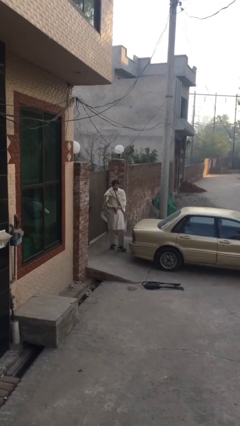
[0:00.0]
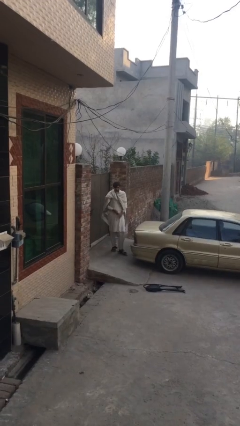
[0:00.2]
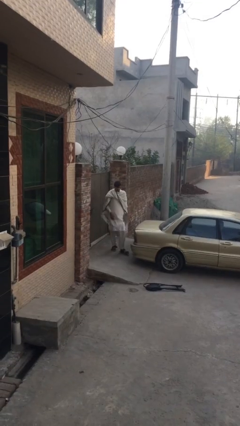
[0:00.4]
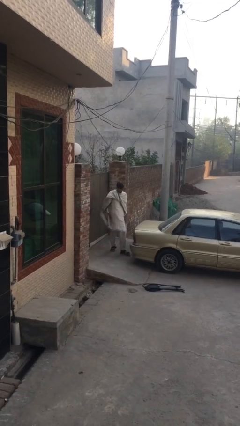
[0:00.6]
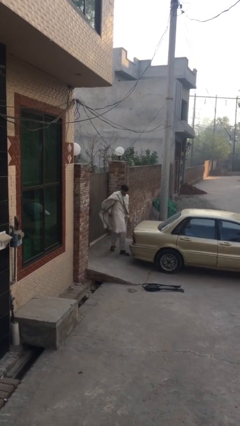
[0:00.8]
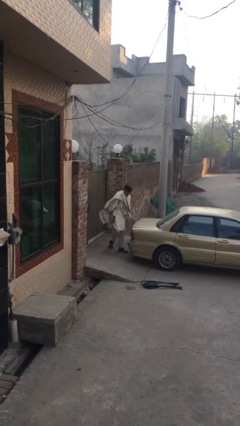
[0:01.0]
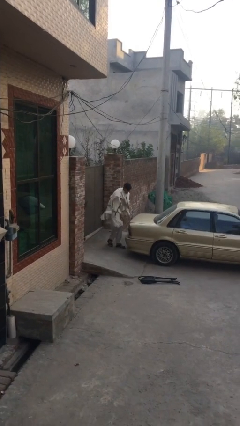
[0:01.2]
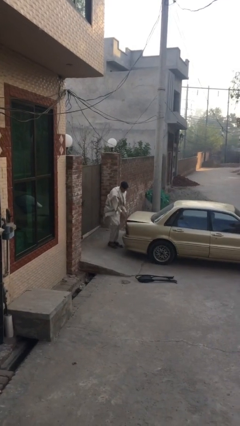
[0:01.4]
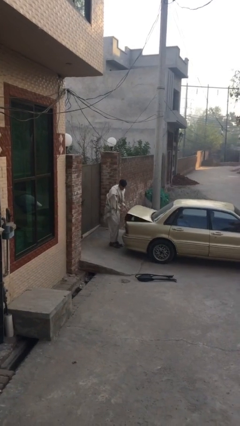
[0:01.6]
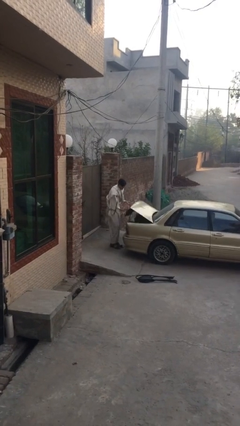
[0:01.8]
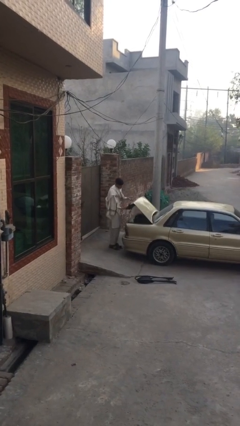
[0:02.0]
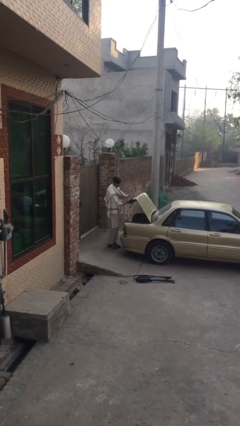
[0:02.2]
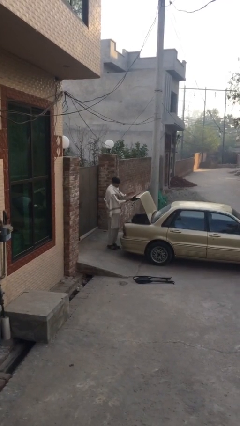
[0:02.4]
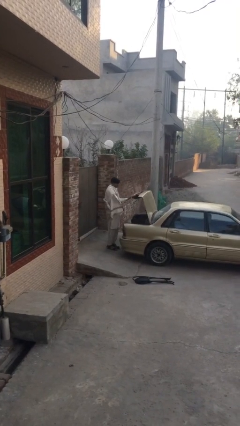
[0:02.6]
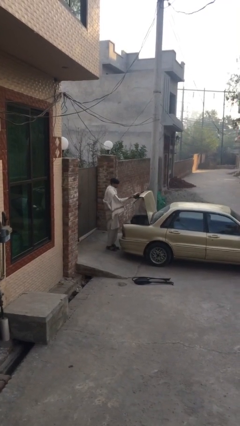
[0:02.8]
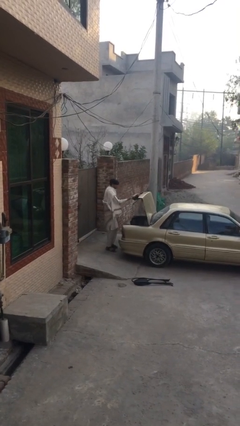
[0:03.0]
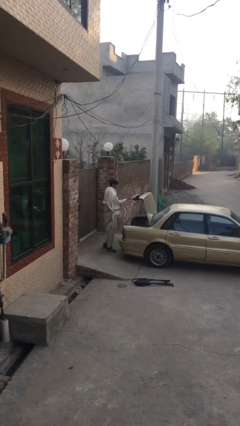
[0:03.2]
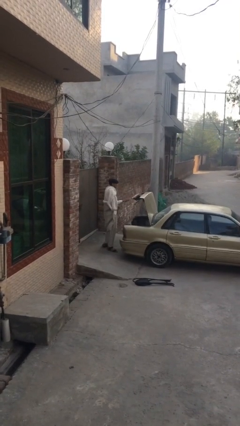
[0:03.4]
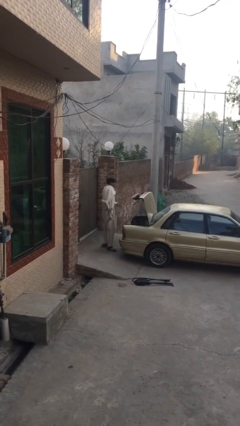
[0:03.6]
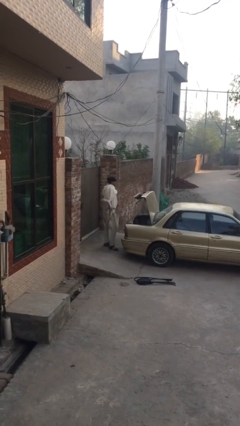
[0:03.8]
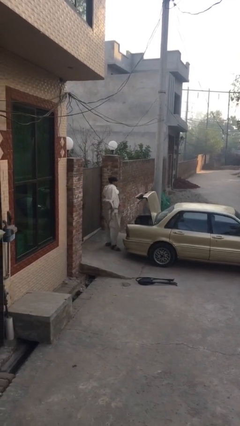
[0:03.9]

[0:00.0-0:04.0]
person opens car trunk

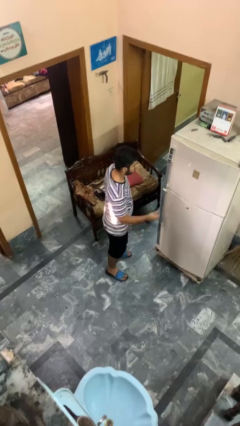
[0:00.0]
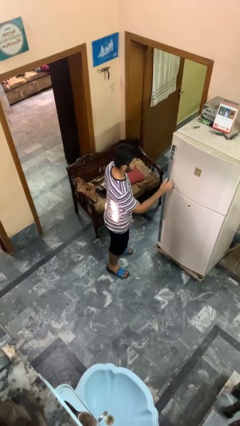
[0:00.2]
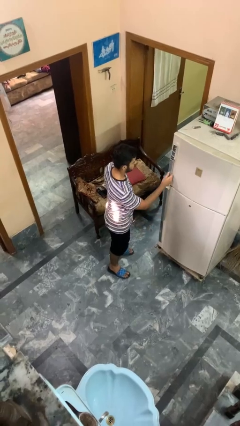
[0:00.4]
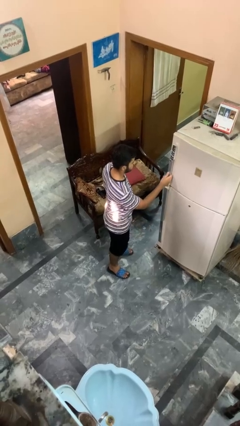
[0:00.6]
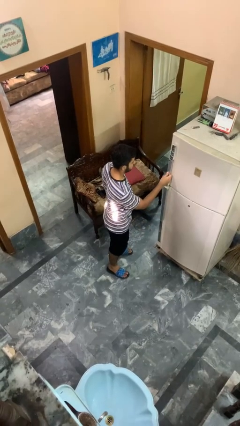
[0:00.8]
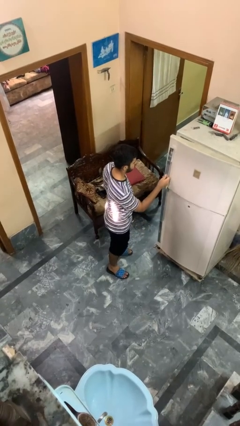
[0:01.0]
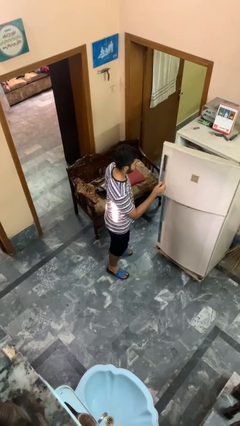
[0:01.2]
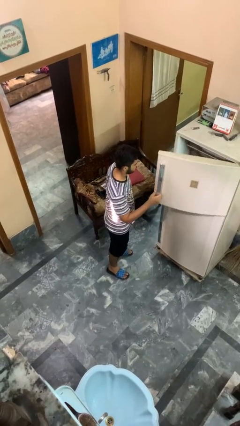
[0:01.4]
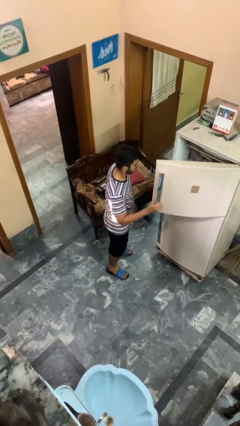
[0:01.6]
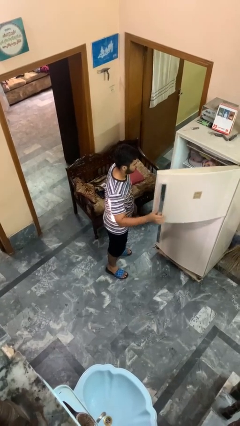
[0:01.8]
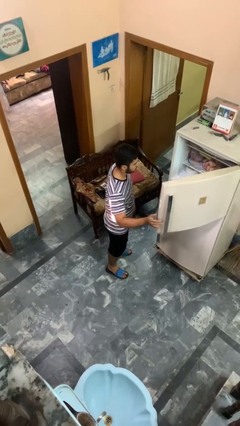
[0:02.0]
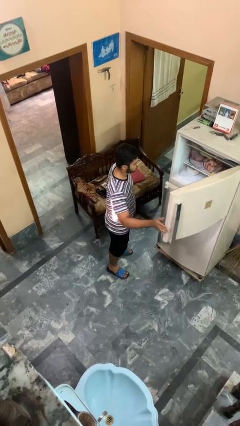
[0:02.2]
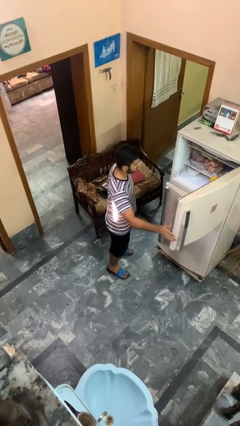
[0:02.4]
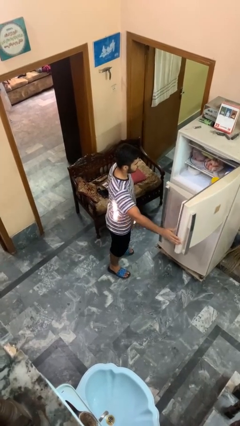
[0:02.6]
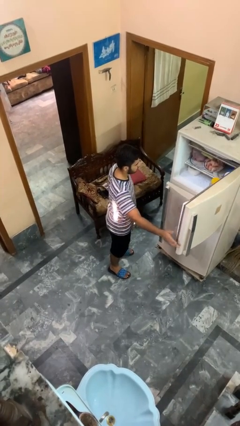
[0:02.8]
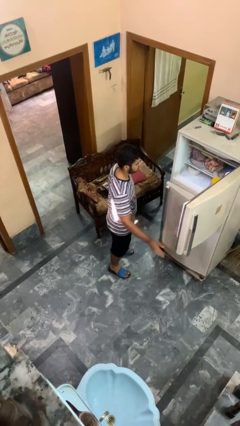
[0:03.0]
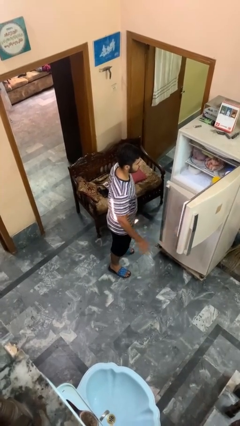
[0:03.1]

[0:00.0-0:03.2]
person opens refrigerator

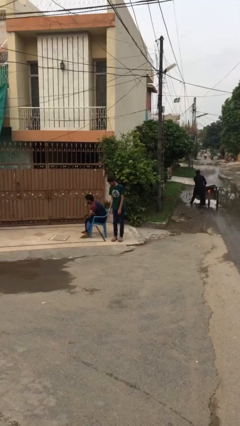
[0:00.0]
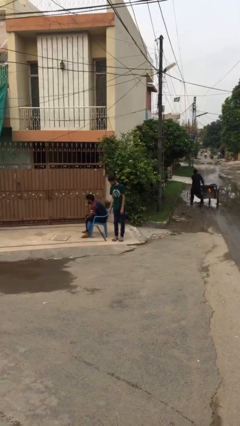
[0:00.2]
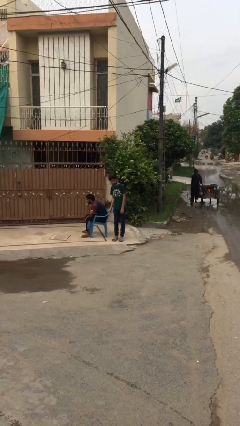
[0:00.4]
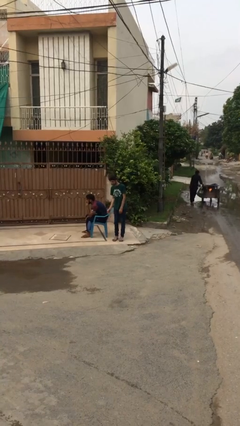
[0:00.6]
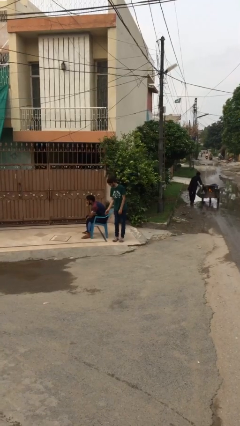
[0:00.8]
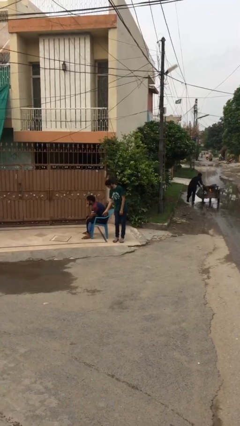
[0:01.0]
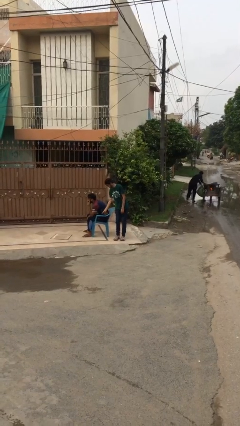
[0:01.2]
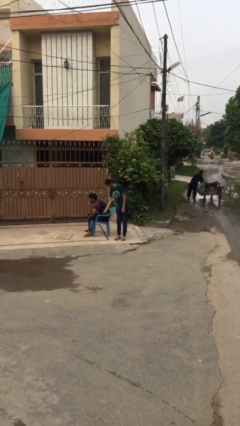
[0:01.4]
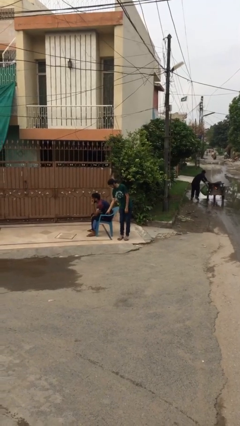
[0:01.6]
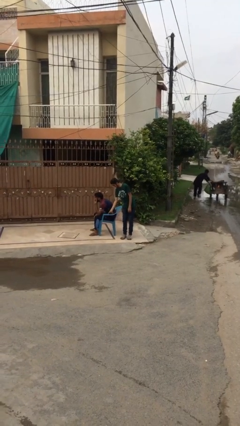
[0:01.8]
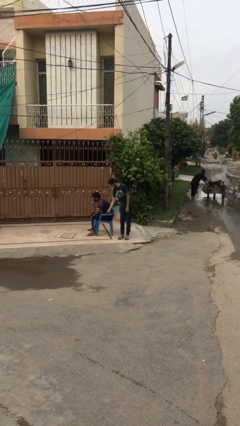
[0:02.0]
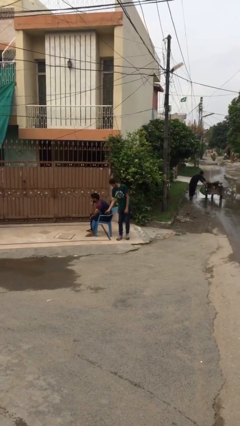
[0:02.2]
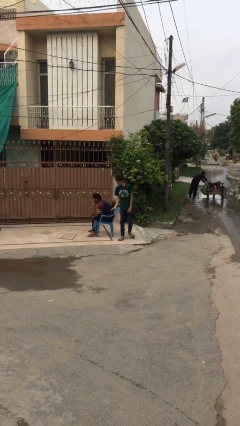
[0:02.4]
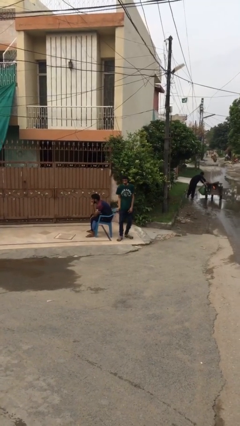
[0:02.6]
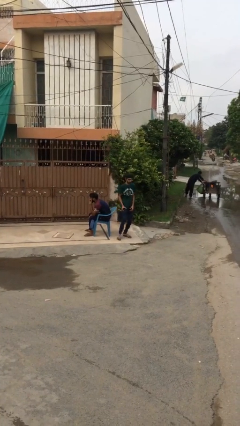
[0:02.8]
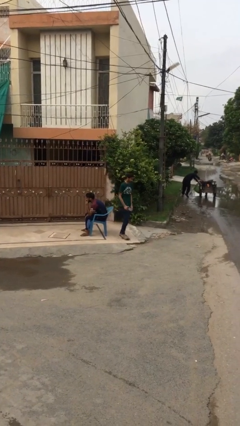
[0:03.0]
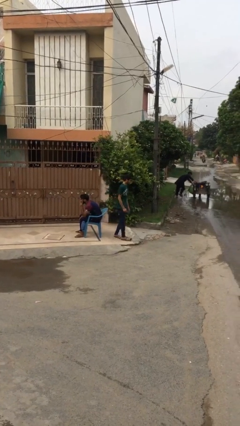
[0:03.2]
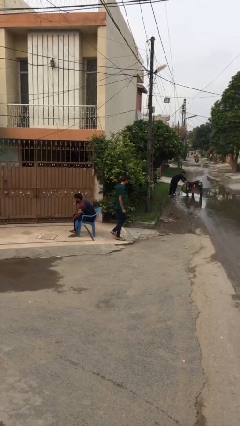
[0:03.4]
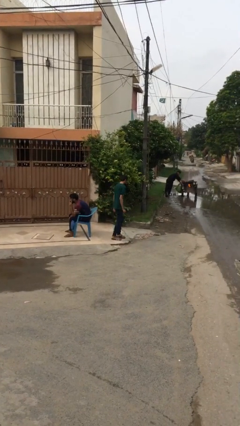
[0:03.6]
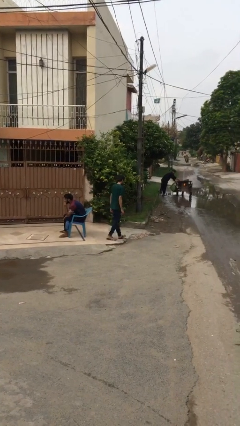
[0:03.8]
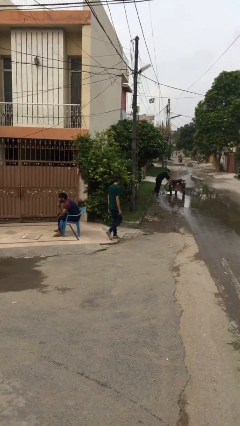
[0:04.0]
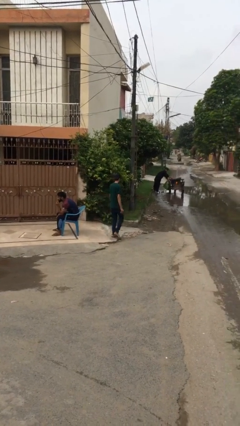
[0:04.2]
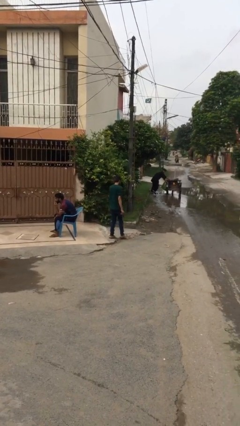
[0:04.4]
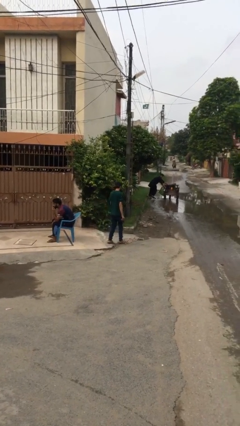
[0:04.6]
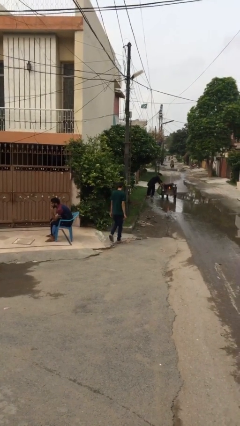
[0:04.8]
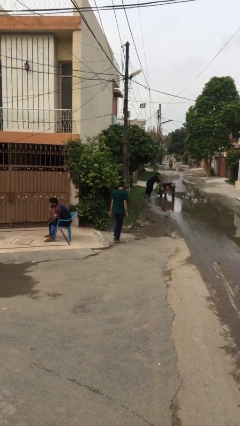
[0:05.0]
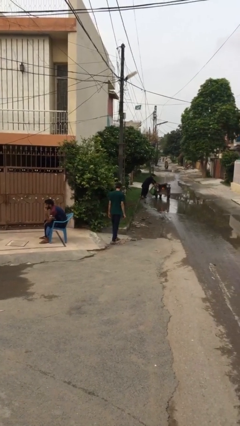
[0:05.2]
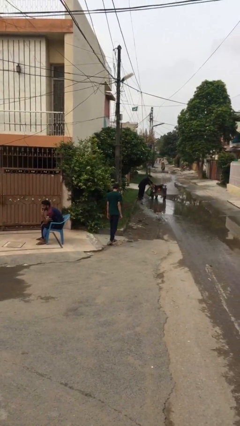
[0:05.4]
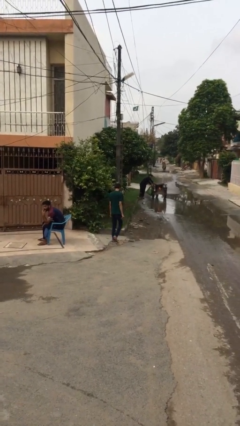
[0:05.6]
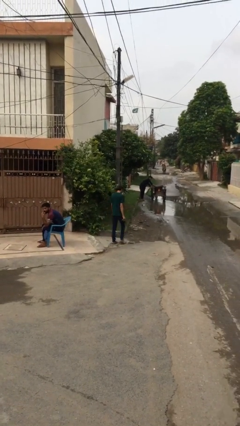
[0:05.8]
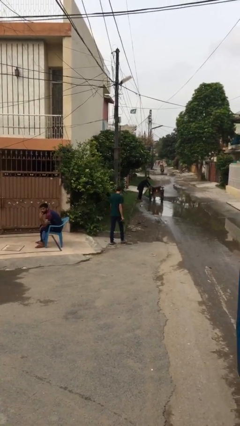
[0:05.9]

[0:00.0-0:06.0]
person steals object from person

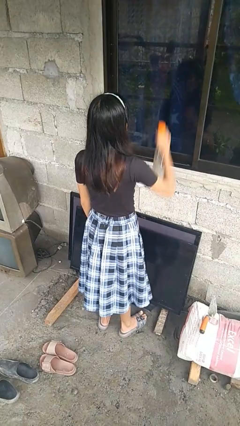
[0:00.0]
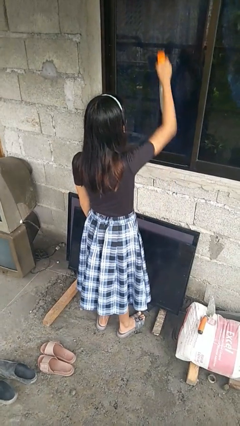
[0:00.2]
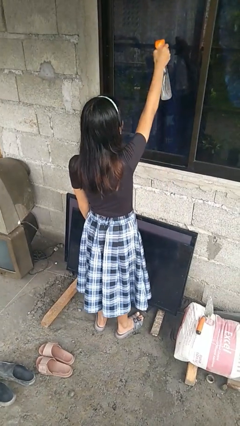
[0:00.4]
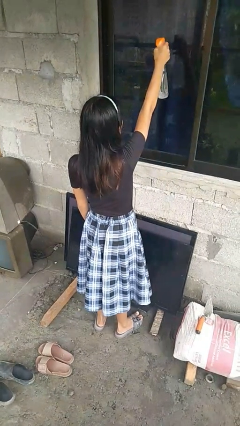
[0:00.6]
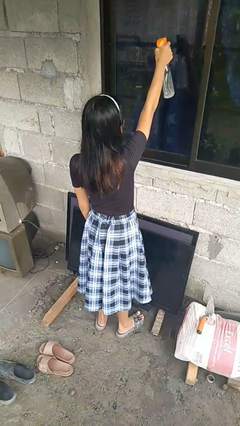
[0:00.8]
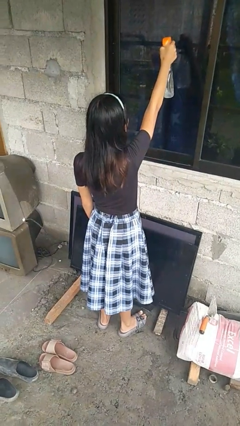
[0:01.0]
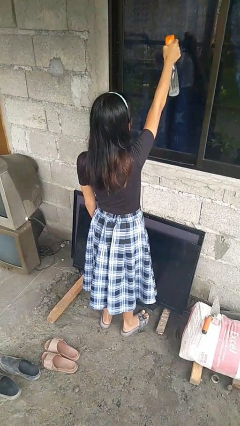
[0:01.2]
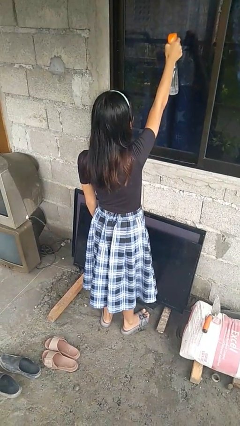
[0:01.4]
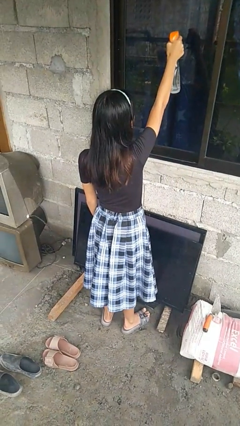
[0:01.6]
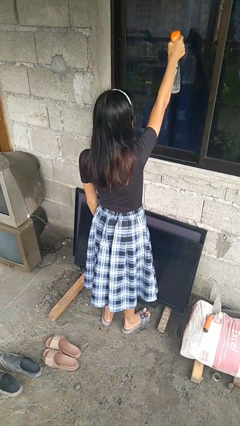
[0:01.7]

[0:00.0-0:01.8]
person sprays from bottle

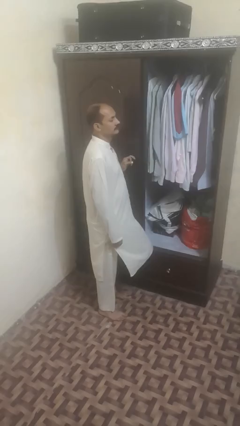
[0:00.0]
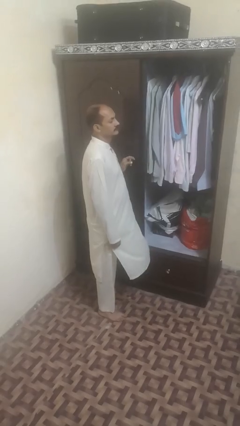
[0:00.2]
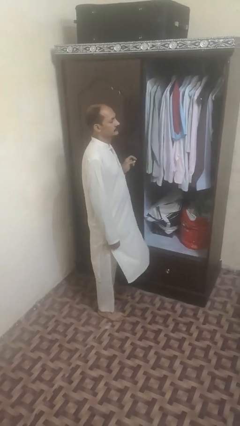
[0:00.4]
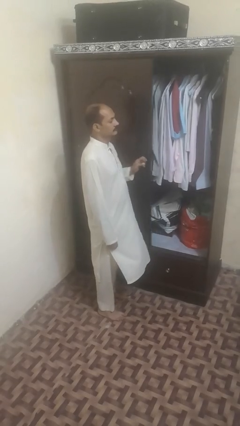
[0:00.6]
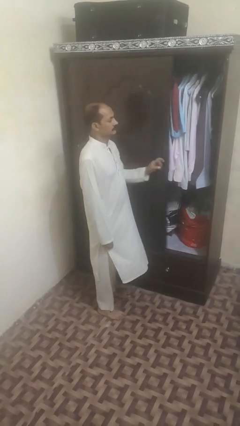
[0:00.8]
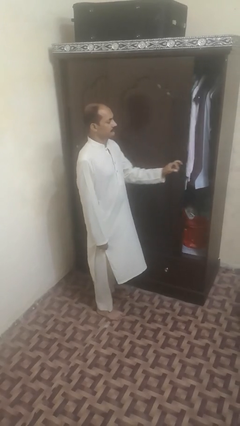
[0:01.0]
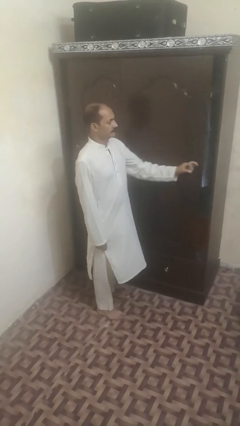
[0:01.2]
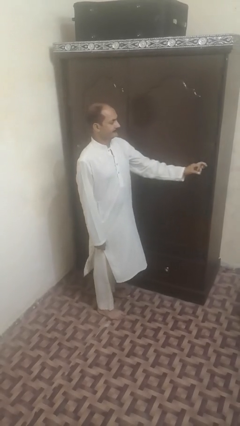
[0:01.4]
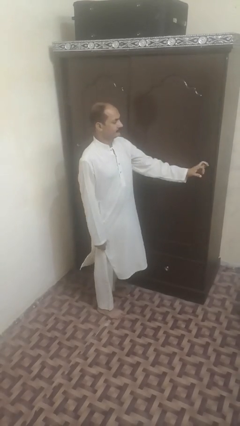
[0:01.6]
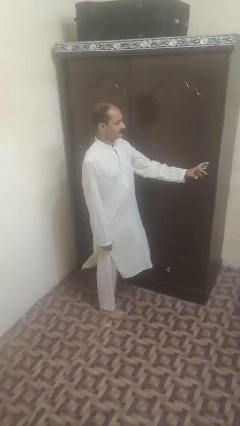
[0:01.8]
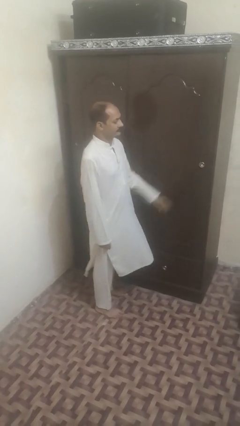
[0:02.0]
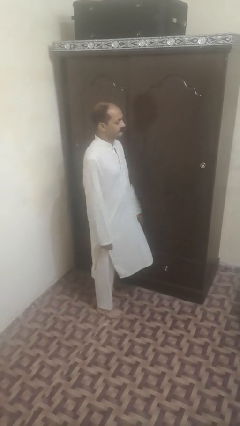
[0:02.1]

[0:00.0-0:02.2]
person closes sliding door

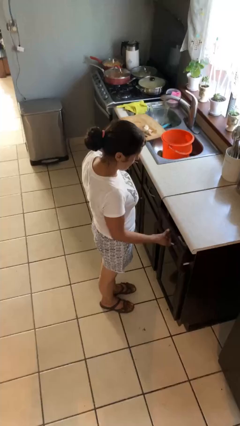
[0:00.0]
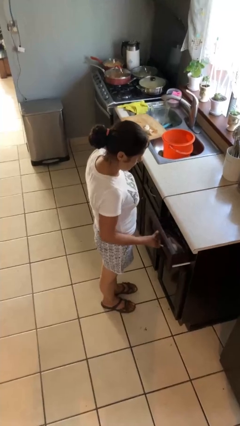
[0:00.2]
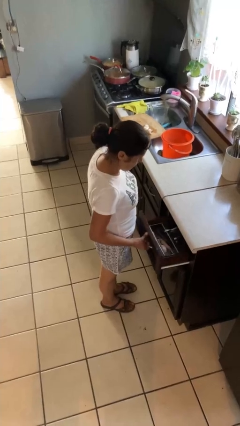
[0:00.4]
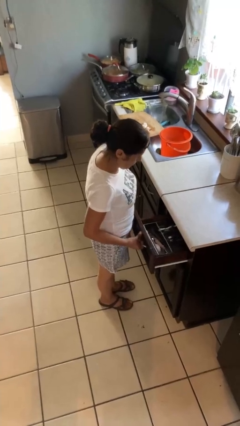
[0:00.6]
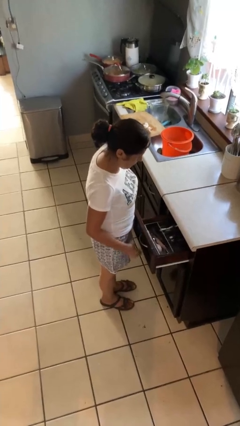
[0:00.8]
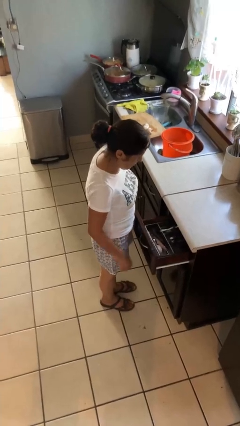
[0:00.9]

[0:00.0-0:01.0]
person opens kitchen drawer
